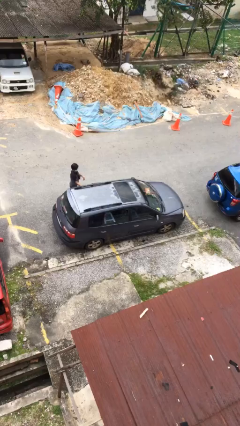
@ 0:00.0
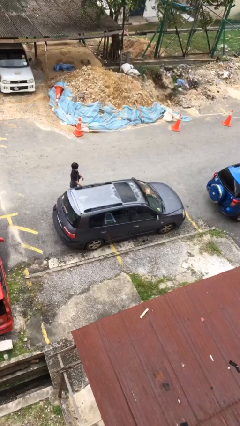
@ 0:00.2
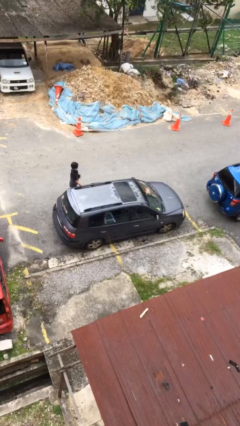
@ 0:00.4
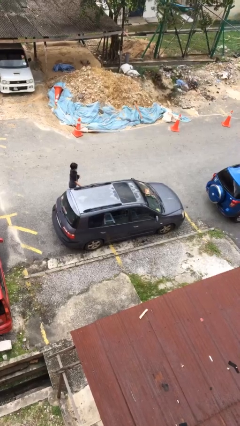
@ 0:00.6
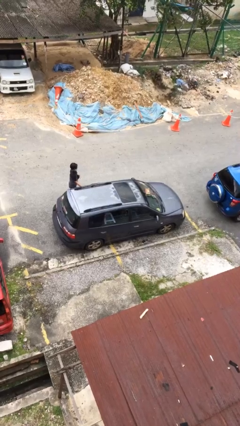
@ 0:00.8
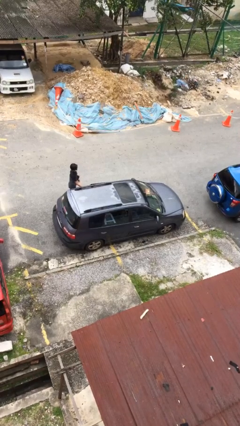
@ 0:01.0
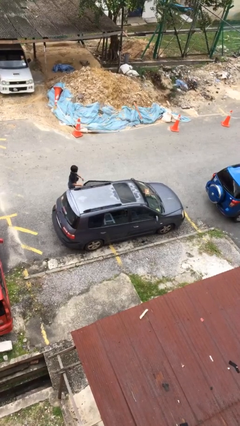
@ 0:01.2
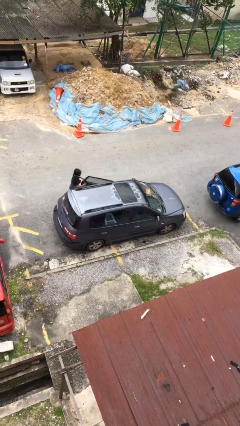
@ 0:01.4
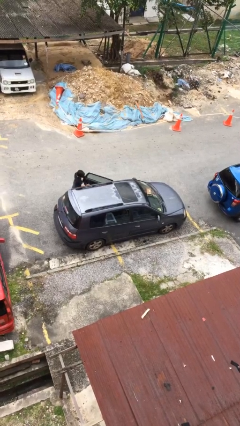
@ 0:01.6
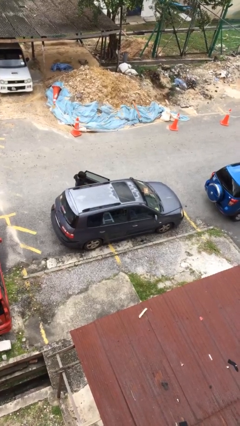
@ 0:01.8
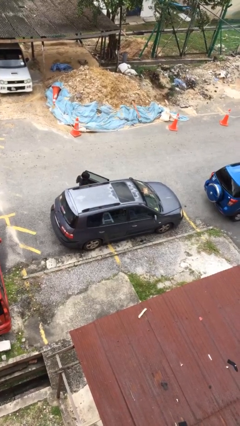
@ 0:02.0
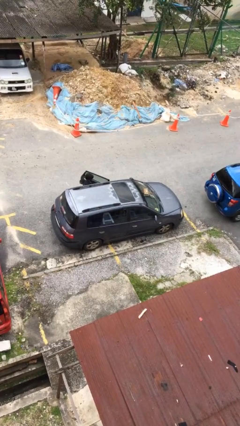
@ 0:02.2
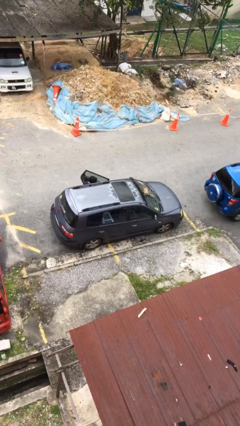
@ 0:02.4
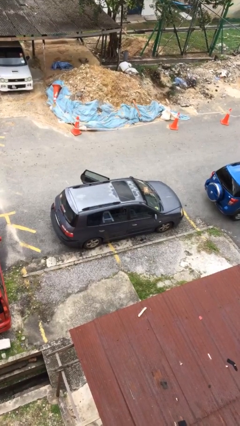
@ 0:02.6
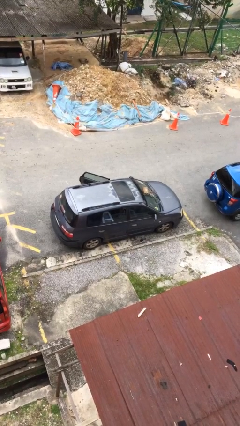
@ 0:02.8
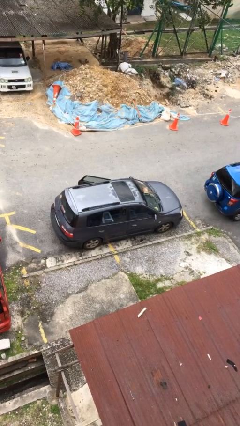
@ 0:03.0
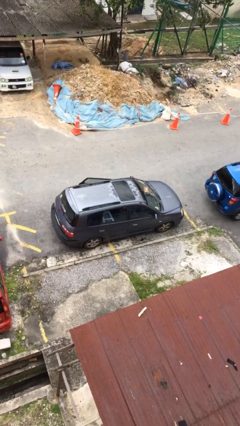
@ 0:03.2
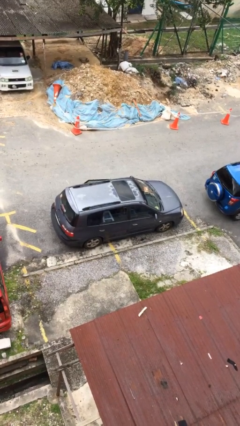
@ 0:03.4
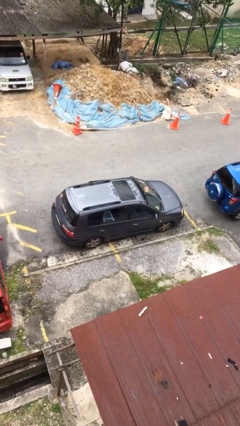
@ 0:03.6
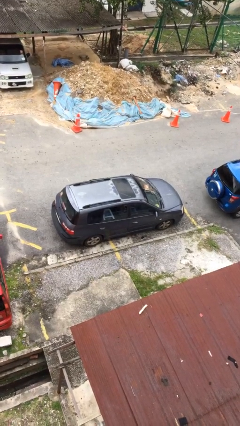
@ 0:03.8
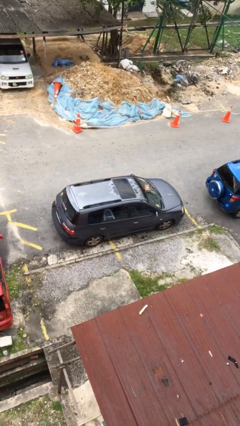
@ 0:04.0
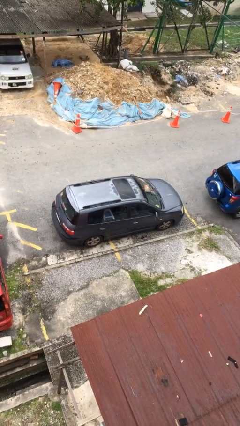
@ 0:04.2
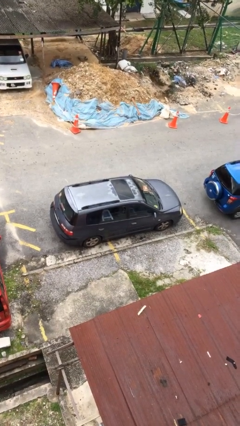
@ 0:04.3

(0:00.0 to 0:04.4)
car picks up person

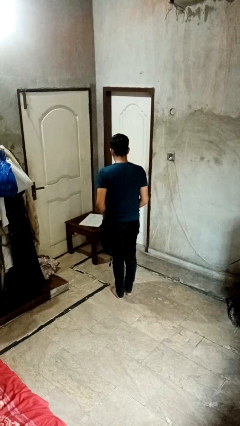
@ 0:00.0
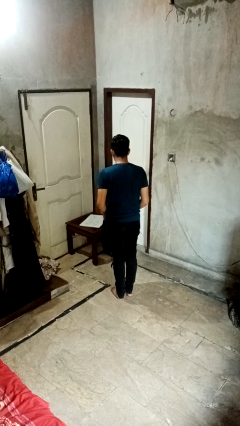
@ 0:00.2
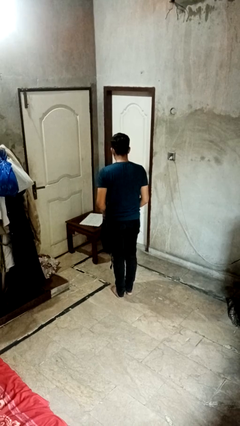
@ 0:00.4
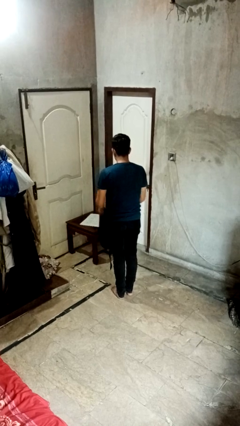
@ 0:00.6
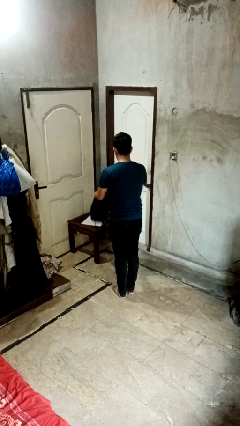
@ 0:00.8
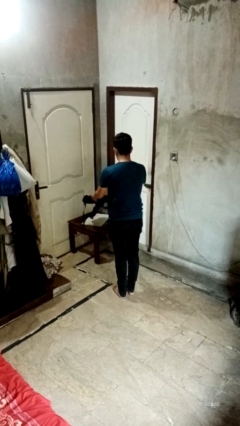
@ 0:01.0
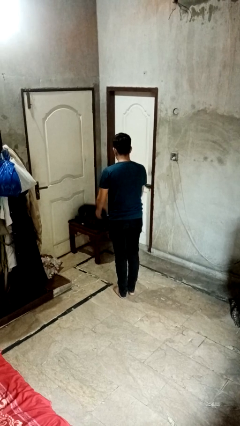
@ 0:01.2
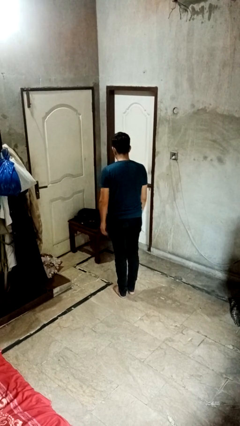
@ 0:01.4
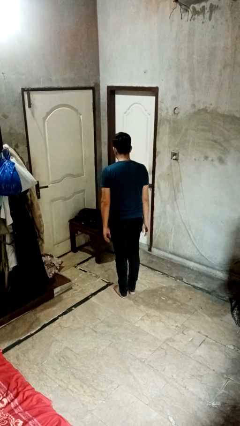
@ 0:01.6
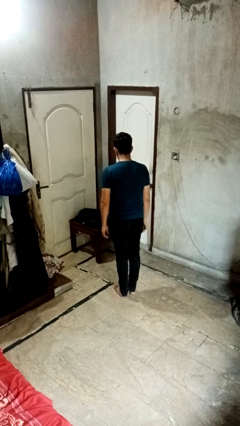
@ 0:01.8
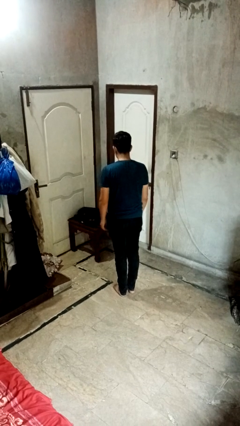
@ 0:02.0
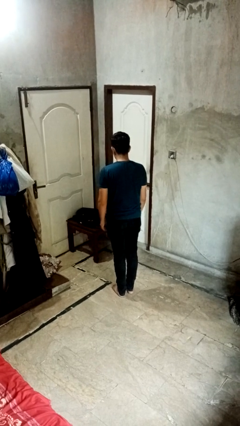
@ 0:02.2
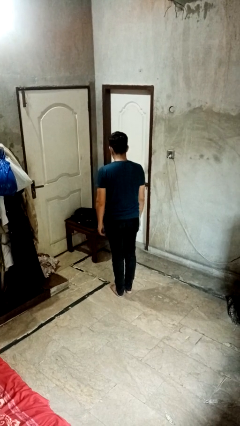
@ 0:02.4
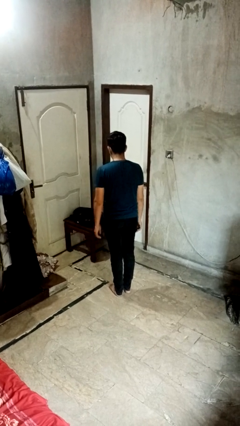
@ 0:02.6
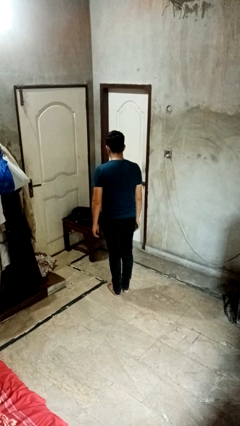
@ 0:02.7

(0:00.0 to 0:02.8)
person throws object on table

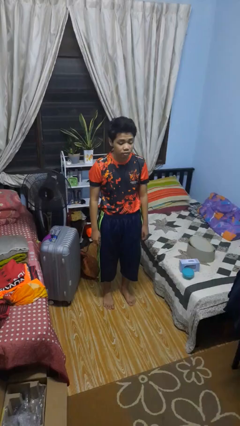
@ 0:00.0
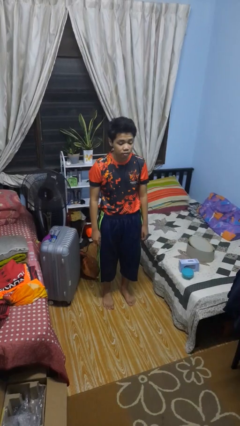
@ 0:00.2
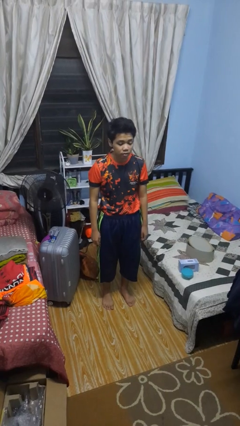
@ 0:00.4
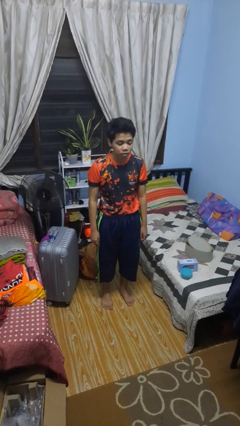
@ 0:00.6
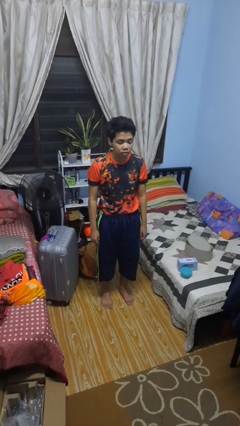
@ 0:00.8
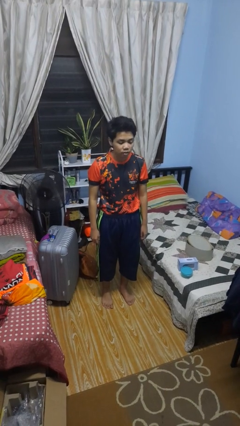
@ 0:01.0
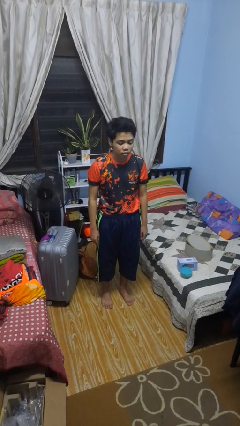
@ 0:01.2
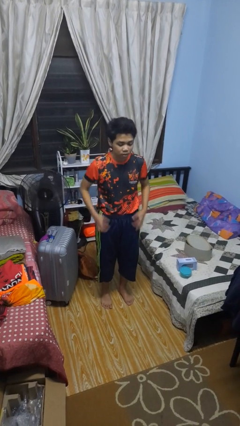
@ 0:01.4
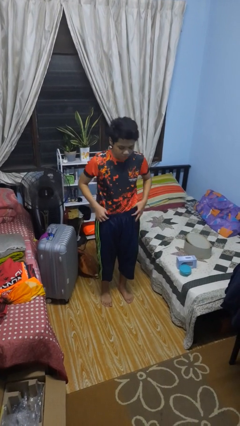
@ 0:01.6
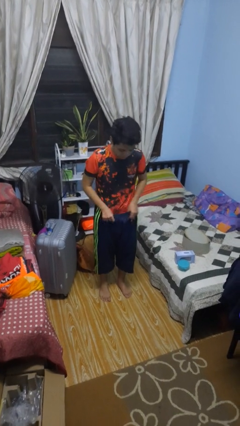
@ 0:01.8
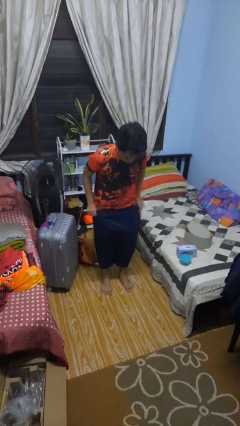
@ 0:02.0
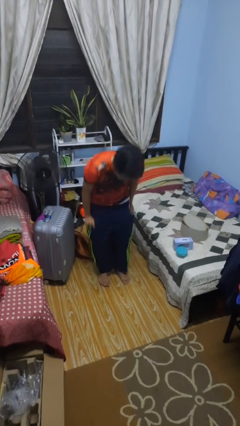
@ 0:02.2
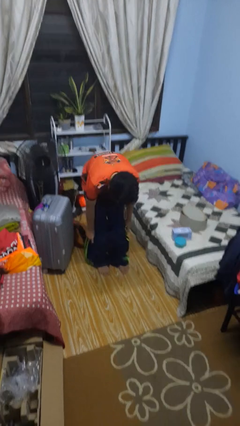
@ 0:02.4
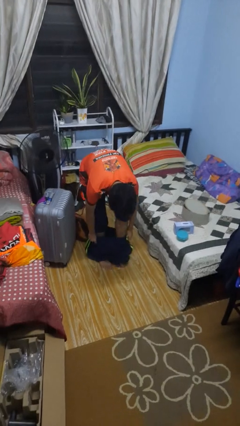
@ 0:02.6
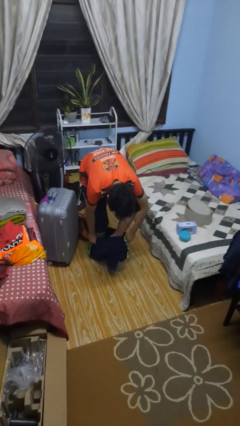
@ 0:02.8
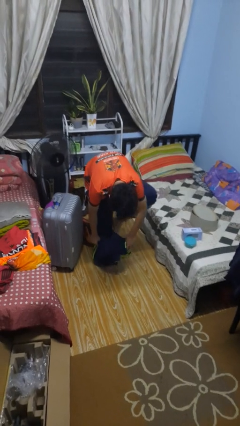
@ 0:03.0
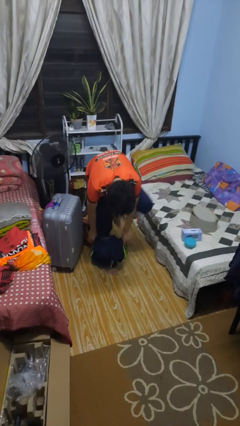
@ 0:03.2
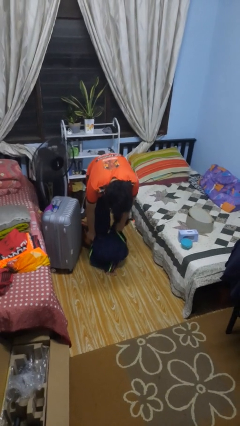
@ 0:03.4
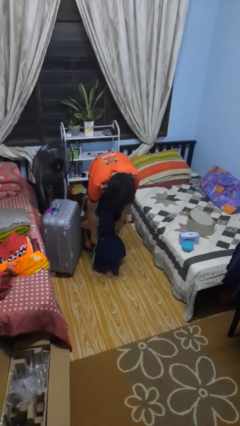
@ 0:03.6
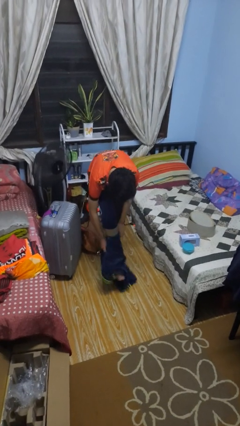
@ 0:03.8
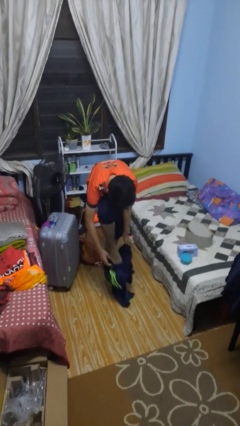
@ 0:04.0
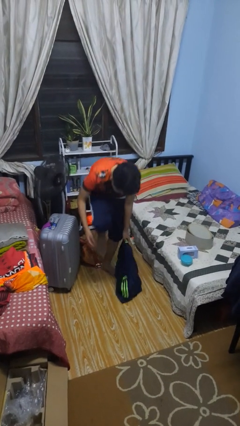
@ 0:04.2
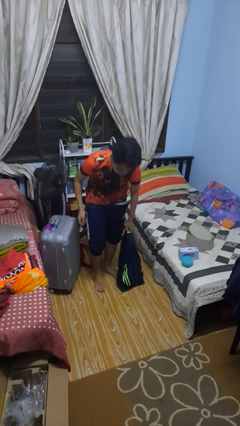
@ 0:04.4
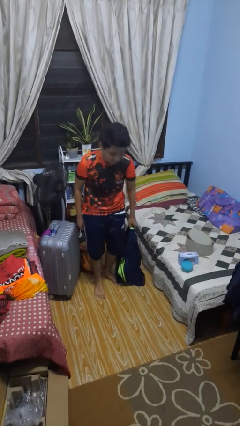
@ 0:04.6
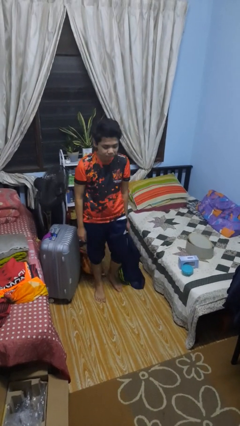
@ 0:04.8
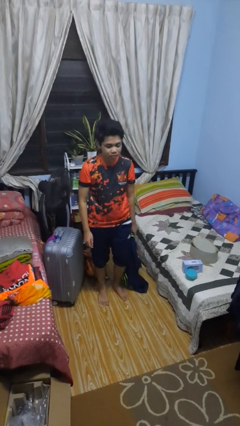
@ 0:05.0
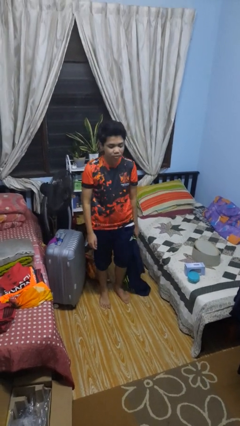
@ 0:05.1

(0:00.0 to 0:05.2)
person takes off pants

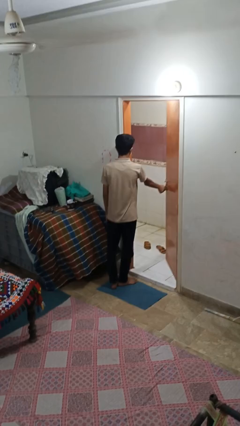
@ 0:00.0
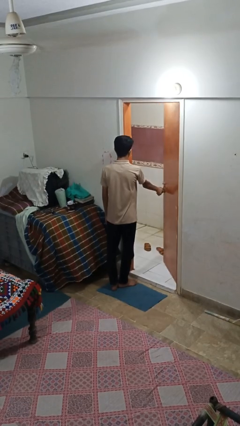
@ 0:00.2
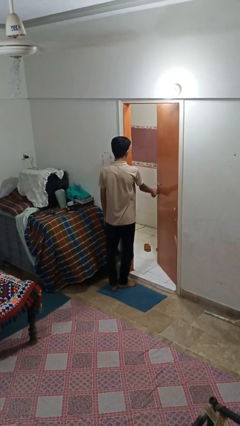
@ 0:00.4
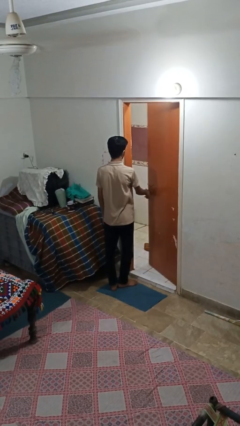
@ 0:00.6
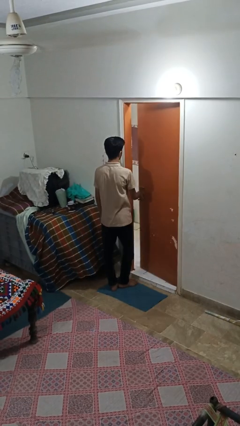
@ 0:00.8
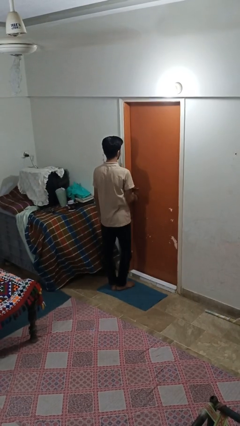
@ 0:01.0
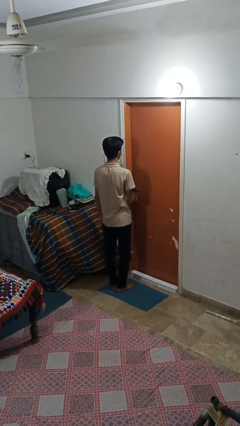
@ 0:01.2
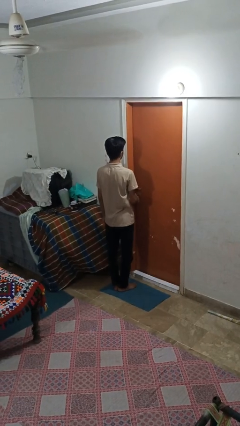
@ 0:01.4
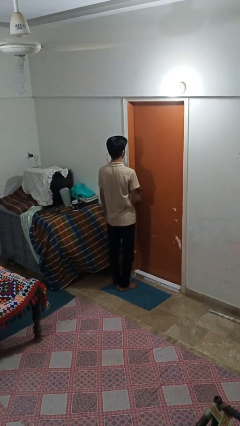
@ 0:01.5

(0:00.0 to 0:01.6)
person closes facility door

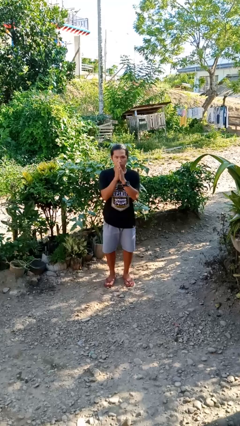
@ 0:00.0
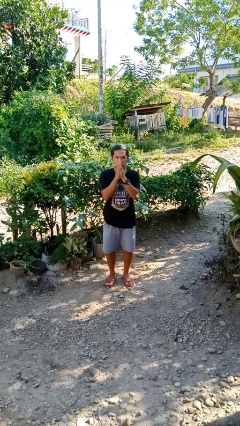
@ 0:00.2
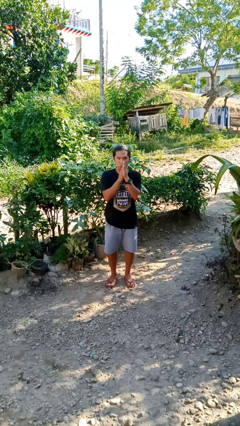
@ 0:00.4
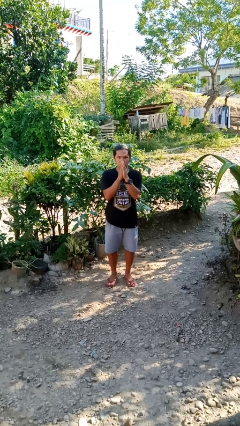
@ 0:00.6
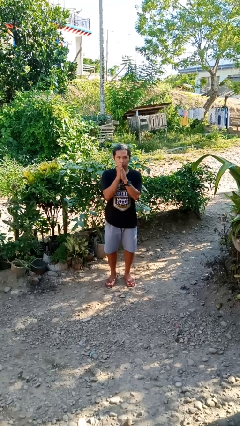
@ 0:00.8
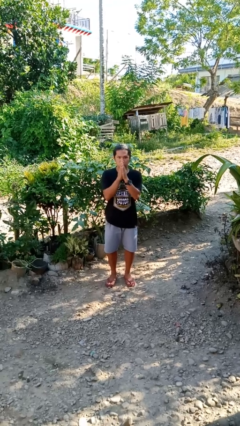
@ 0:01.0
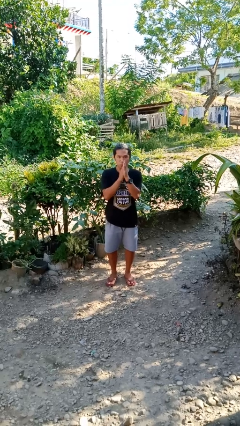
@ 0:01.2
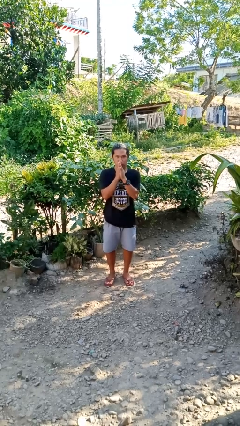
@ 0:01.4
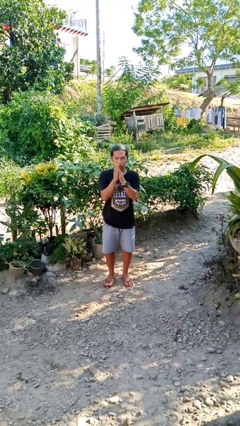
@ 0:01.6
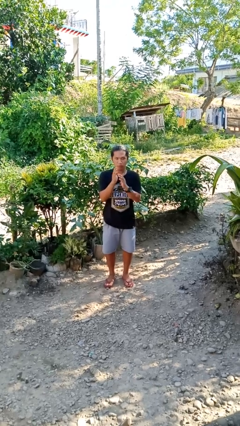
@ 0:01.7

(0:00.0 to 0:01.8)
person blows into hands

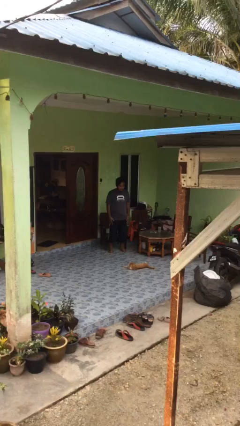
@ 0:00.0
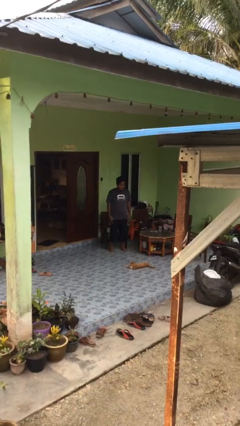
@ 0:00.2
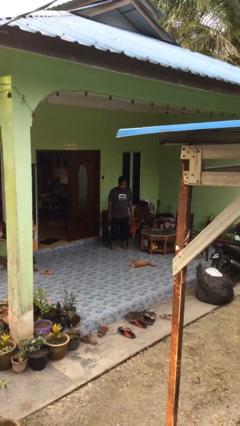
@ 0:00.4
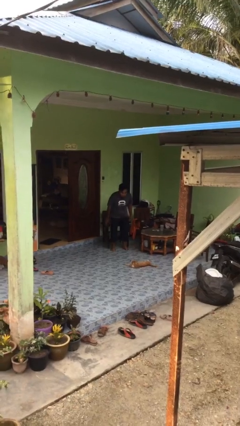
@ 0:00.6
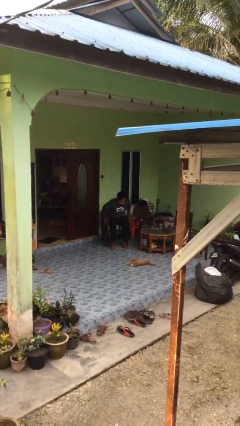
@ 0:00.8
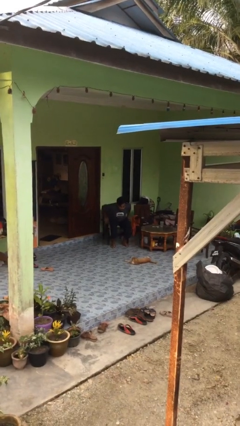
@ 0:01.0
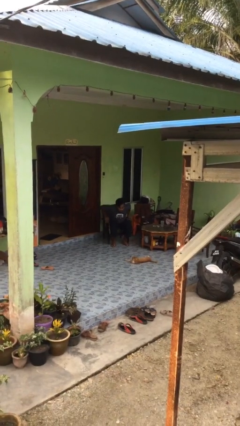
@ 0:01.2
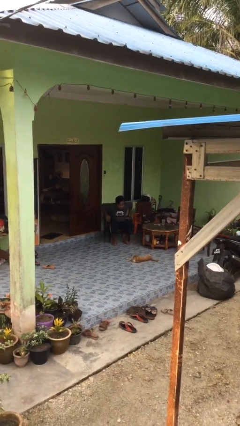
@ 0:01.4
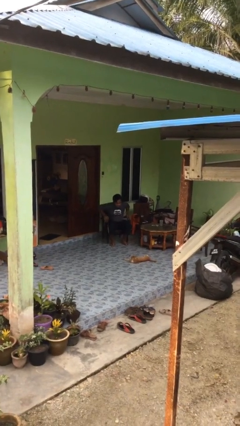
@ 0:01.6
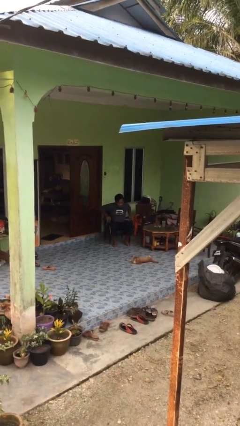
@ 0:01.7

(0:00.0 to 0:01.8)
person sits down
